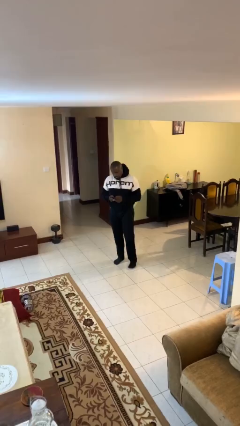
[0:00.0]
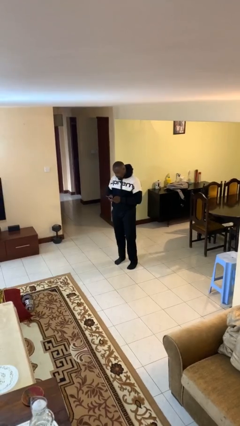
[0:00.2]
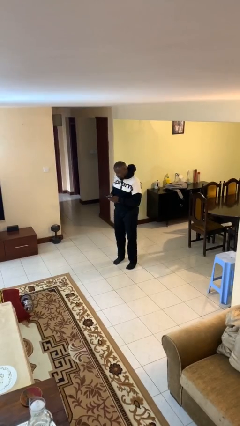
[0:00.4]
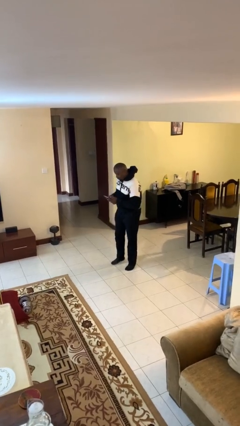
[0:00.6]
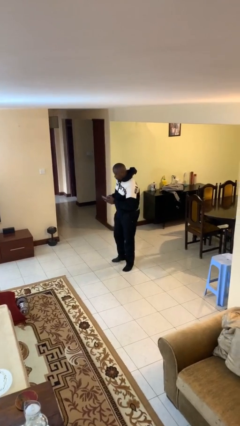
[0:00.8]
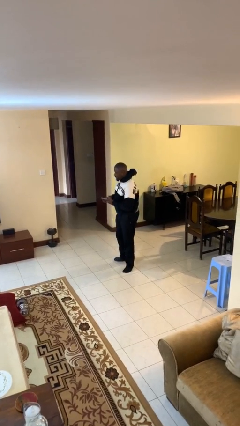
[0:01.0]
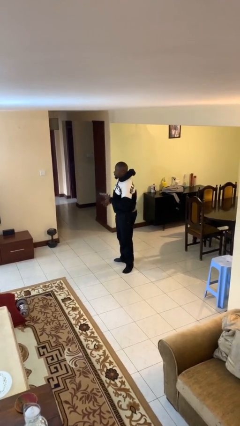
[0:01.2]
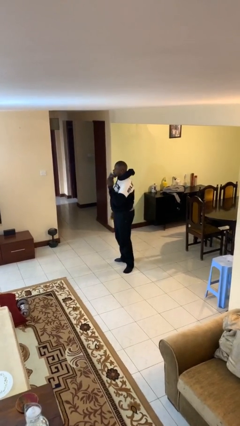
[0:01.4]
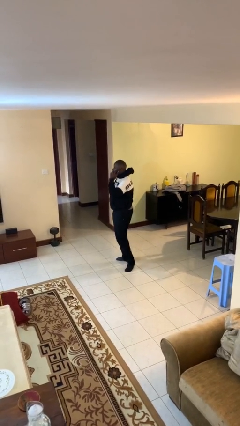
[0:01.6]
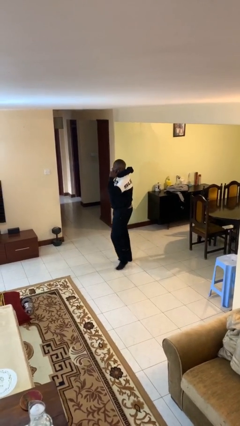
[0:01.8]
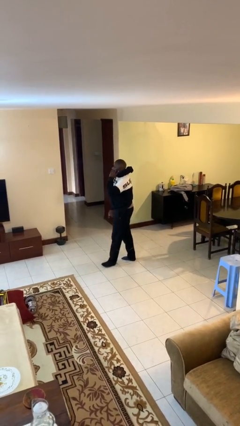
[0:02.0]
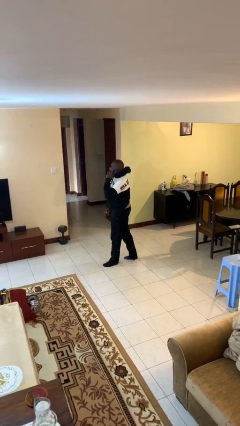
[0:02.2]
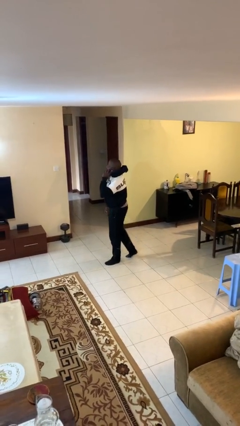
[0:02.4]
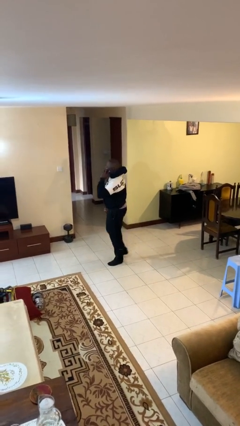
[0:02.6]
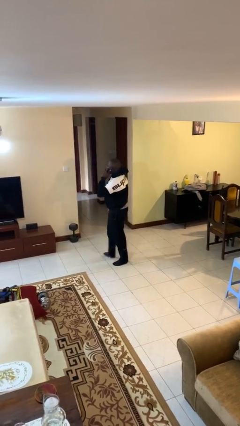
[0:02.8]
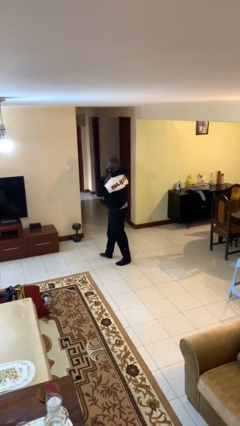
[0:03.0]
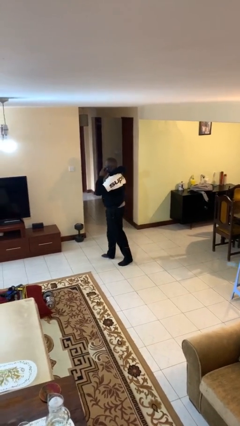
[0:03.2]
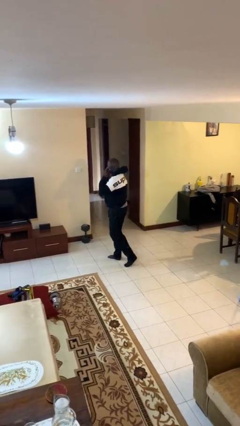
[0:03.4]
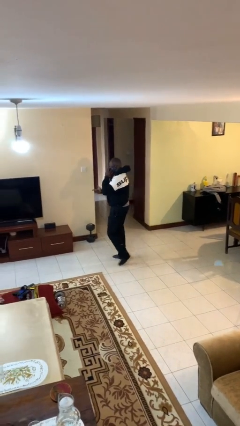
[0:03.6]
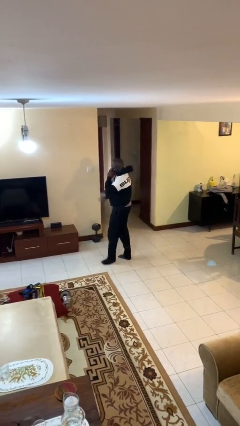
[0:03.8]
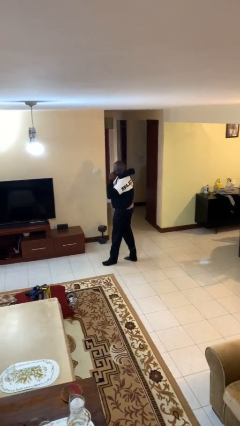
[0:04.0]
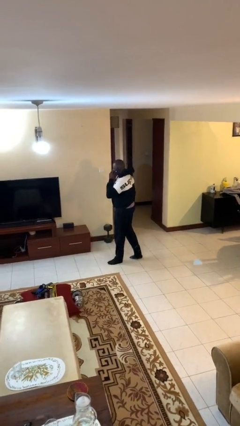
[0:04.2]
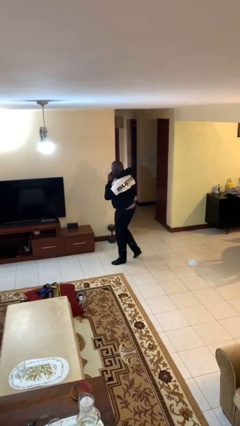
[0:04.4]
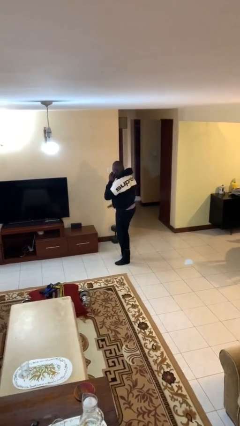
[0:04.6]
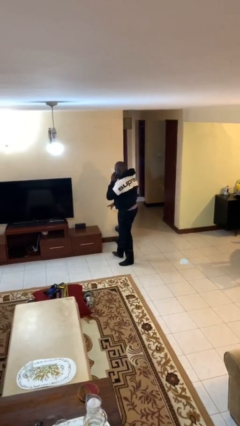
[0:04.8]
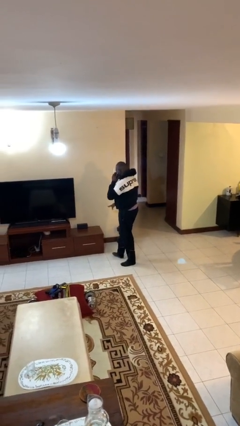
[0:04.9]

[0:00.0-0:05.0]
person talks on phone

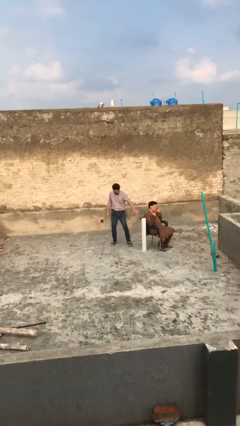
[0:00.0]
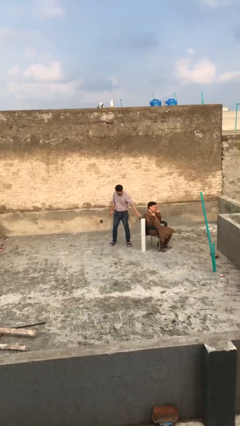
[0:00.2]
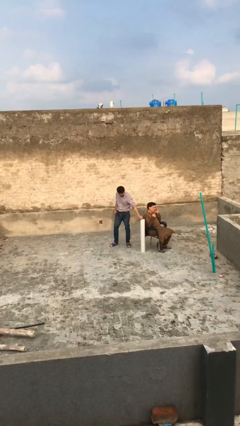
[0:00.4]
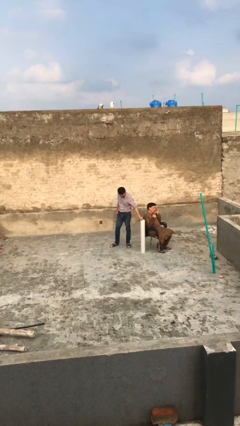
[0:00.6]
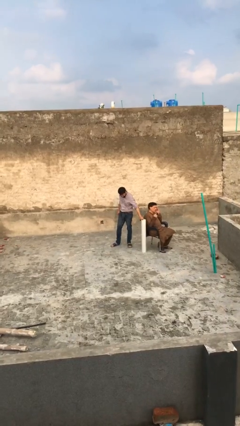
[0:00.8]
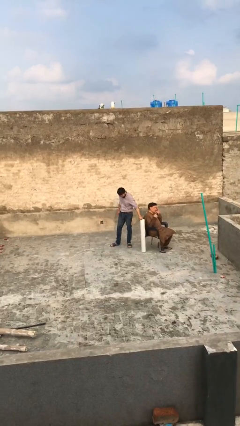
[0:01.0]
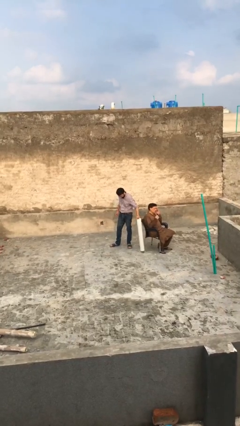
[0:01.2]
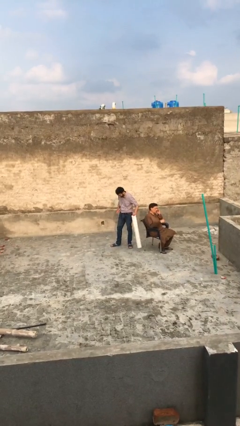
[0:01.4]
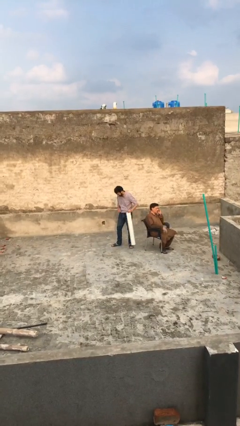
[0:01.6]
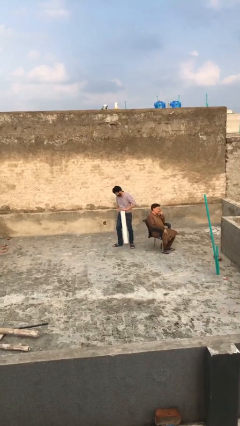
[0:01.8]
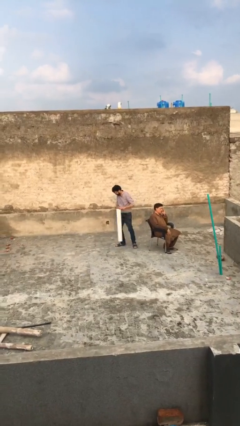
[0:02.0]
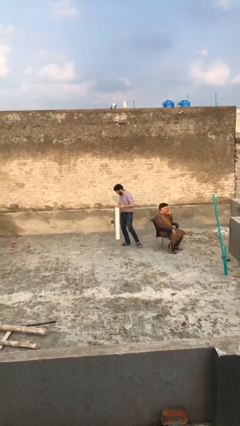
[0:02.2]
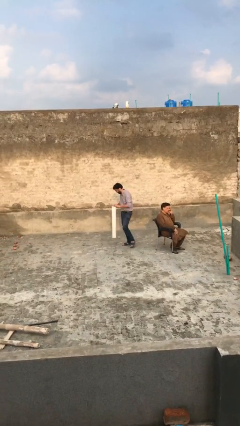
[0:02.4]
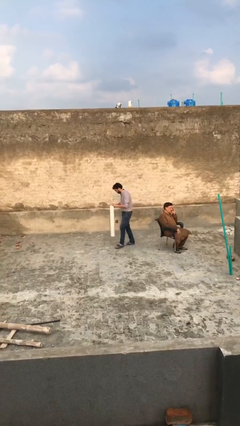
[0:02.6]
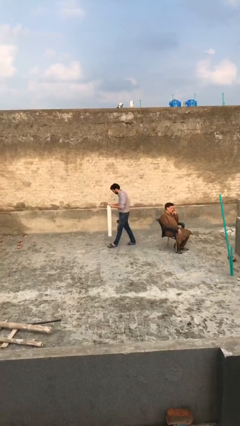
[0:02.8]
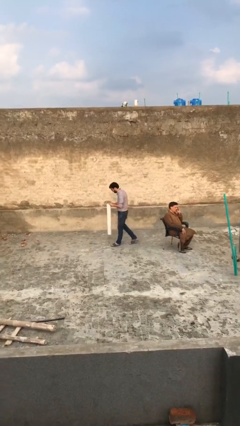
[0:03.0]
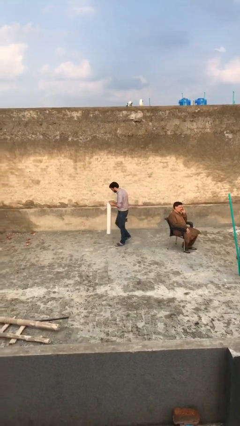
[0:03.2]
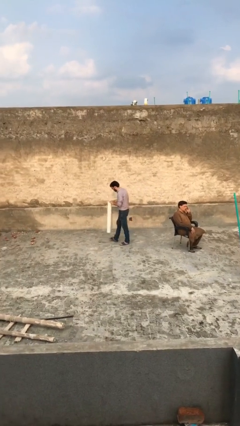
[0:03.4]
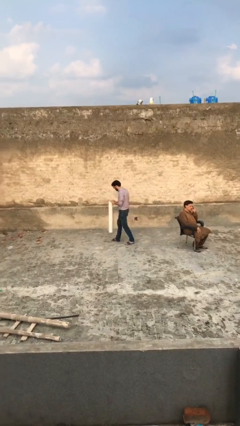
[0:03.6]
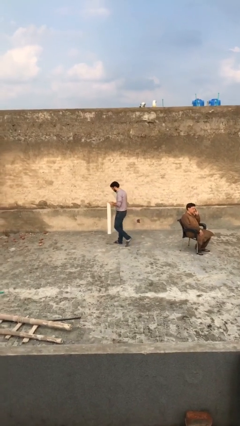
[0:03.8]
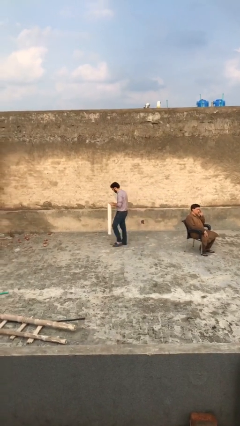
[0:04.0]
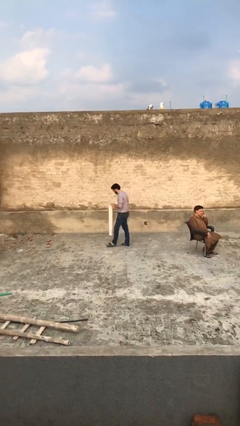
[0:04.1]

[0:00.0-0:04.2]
person steals object from person

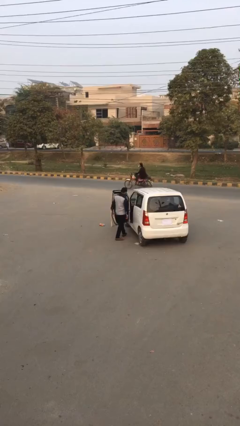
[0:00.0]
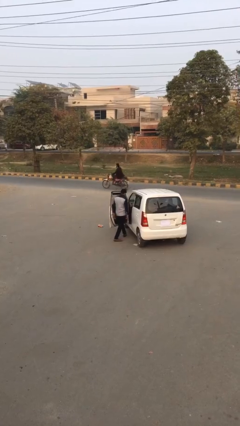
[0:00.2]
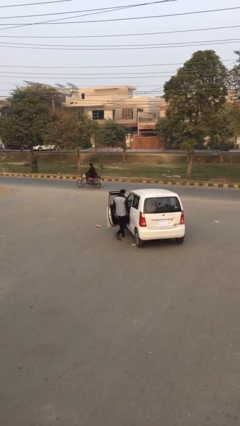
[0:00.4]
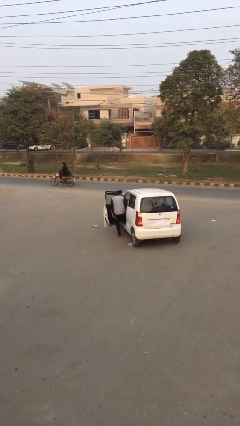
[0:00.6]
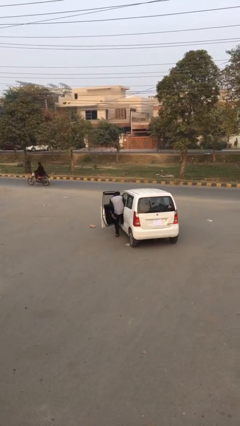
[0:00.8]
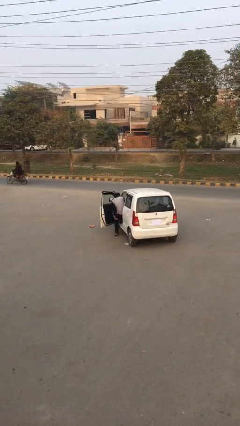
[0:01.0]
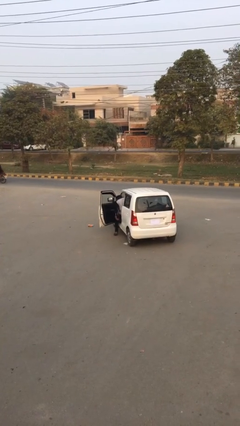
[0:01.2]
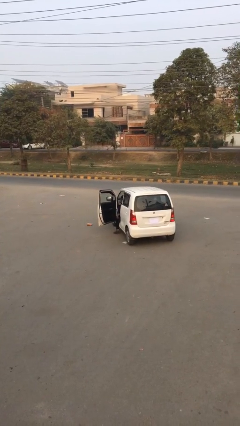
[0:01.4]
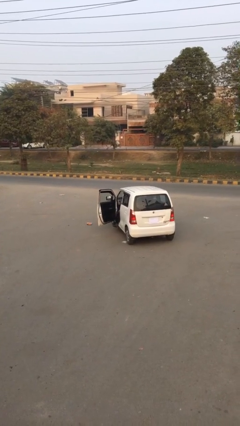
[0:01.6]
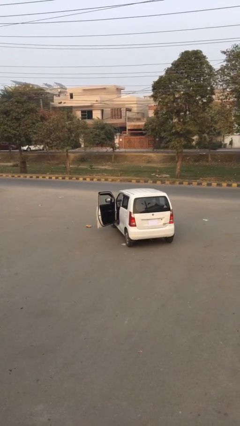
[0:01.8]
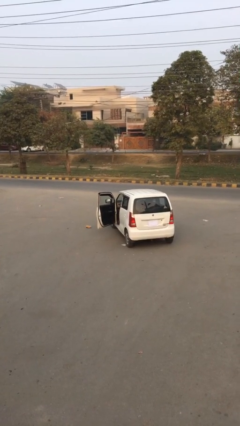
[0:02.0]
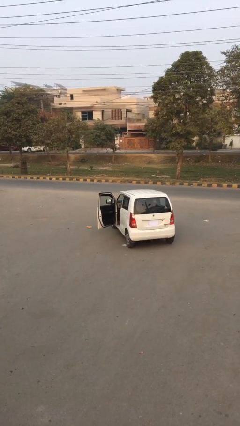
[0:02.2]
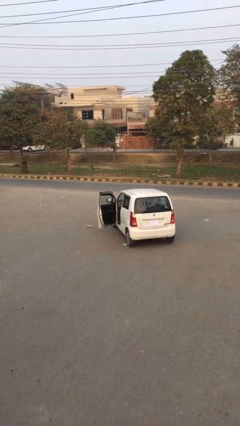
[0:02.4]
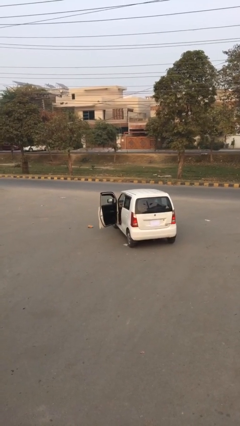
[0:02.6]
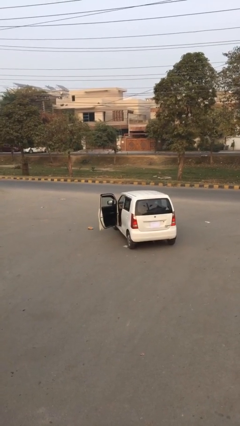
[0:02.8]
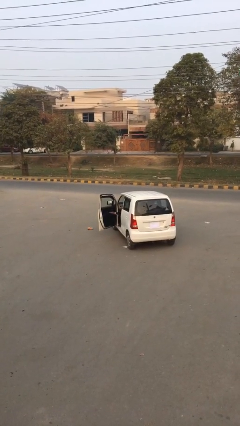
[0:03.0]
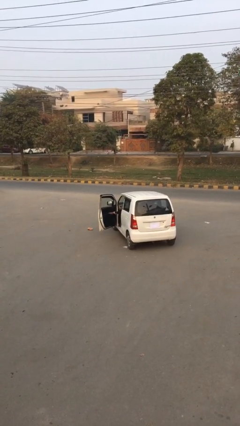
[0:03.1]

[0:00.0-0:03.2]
person enters car

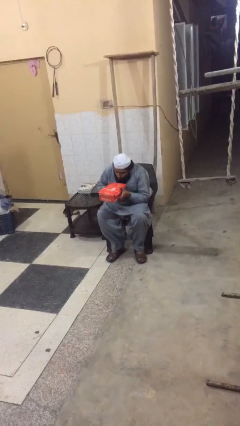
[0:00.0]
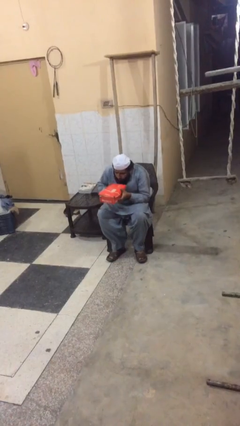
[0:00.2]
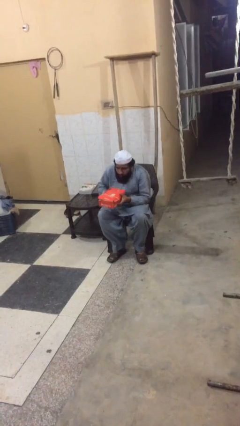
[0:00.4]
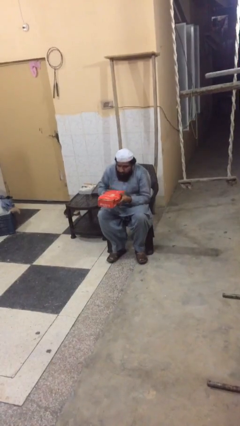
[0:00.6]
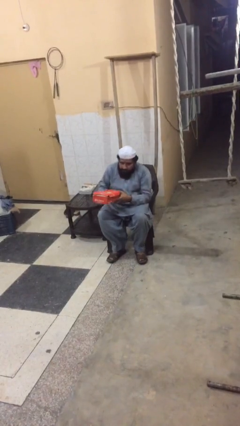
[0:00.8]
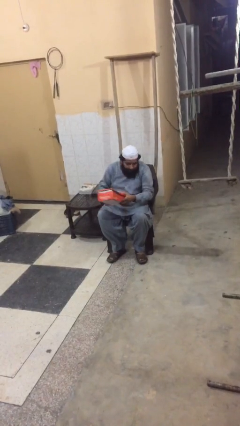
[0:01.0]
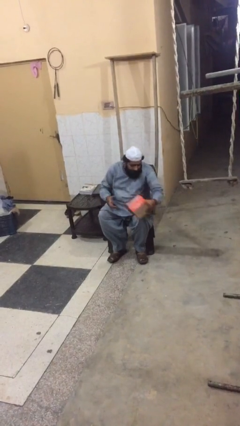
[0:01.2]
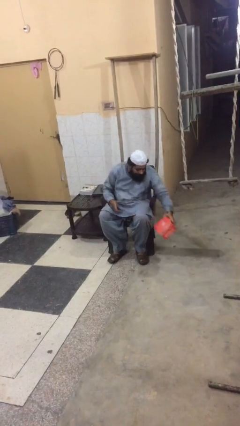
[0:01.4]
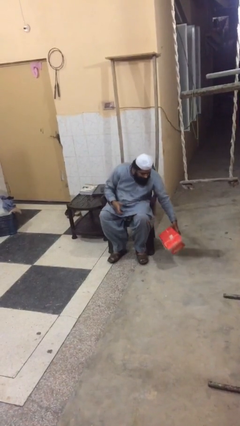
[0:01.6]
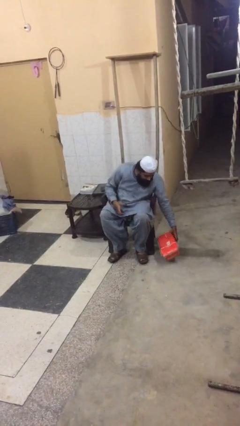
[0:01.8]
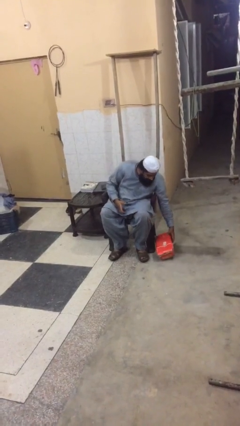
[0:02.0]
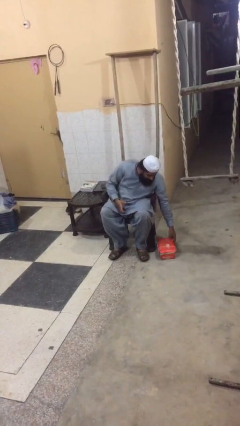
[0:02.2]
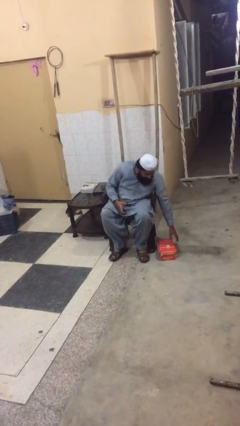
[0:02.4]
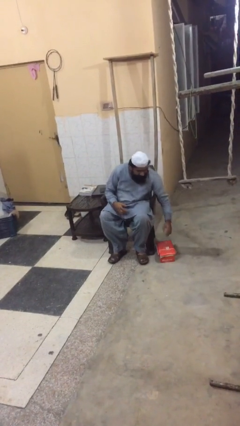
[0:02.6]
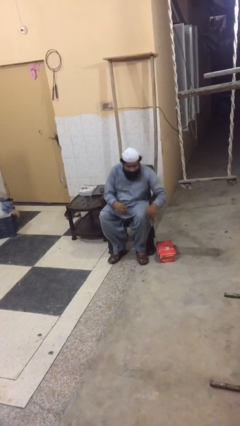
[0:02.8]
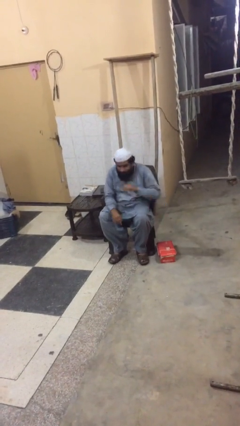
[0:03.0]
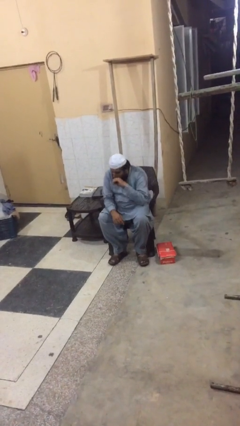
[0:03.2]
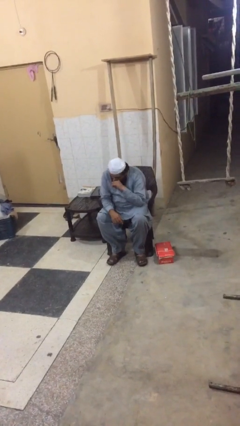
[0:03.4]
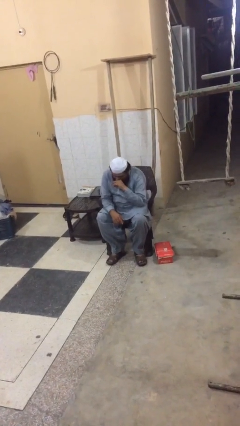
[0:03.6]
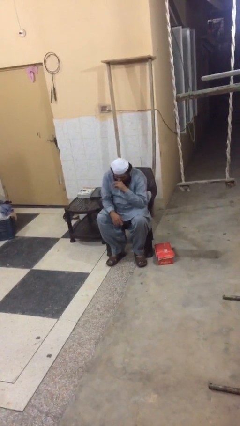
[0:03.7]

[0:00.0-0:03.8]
person puts down object on floor

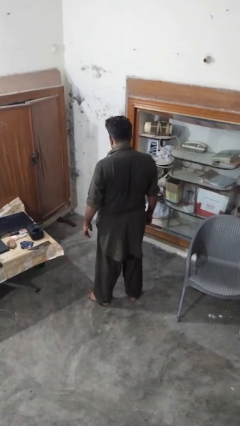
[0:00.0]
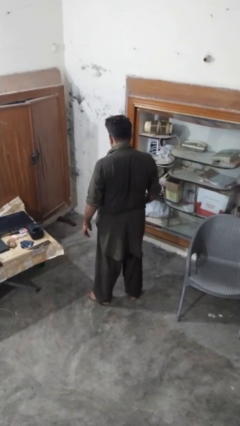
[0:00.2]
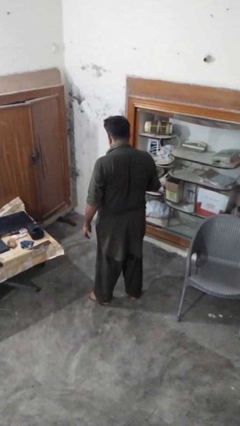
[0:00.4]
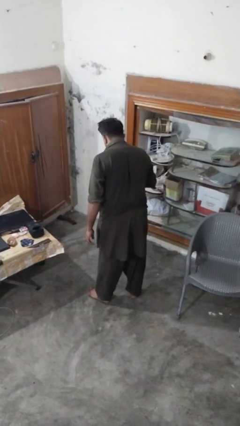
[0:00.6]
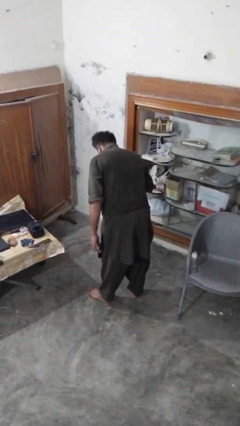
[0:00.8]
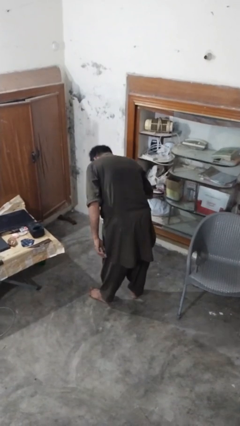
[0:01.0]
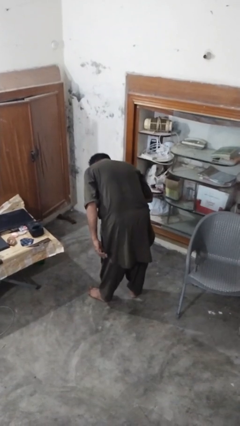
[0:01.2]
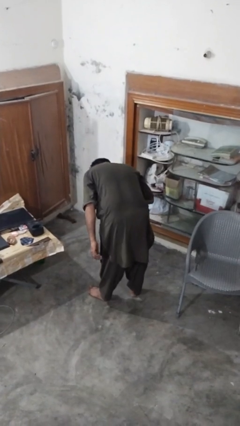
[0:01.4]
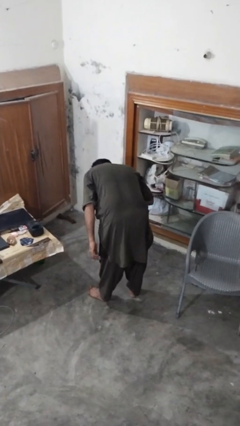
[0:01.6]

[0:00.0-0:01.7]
person bows
